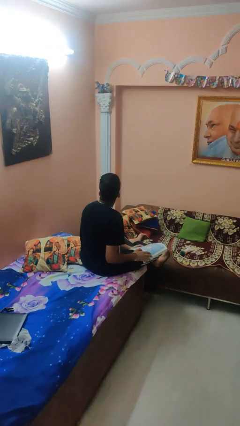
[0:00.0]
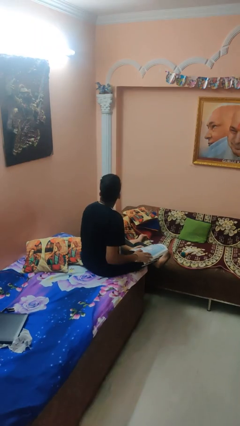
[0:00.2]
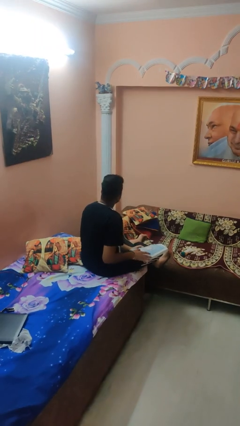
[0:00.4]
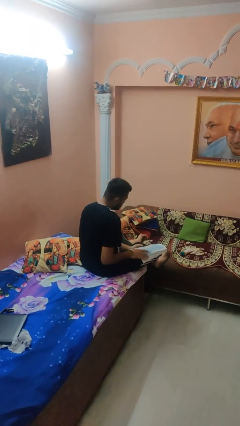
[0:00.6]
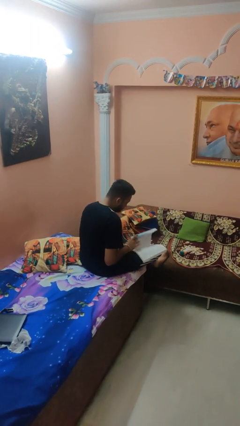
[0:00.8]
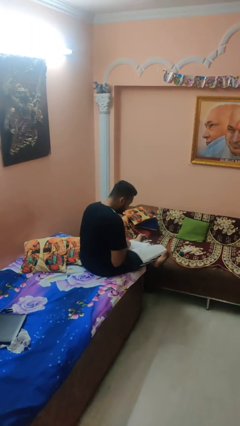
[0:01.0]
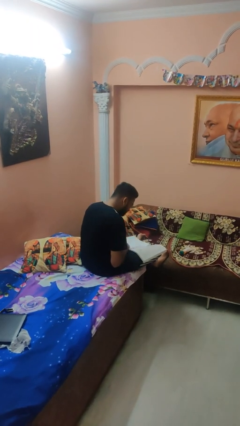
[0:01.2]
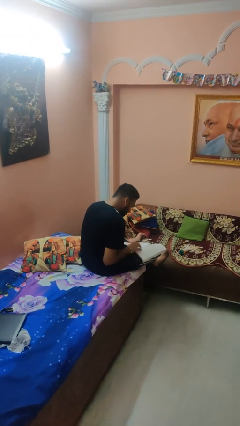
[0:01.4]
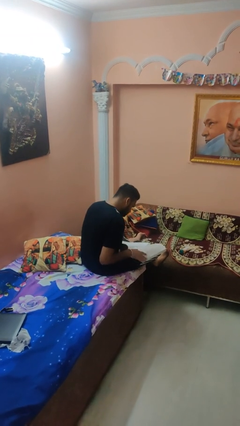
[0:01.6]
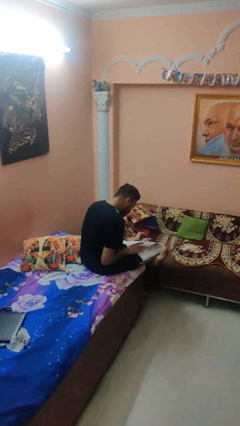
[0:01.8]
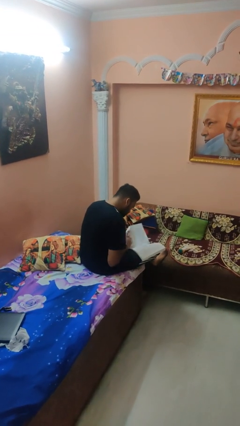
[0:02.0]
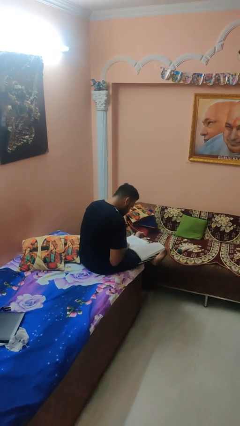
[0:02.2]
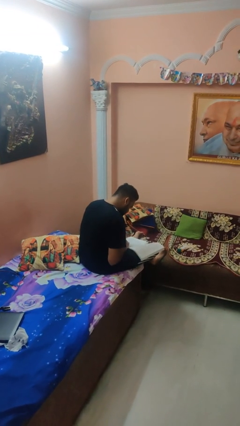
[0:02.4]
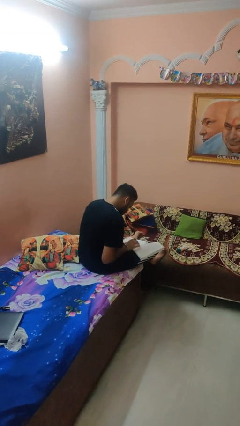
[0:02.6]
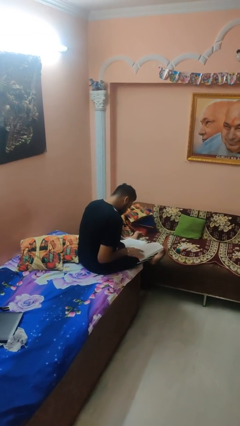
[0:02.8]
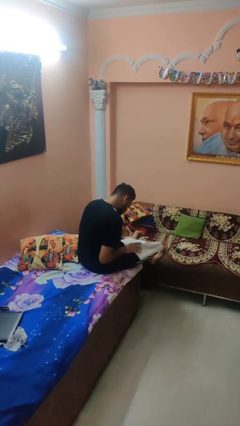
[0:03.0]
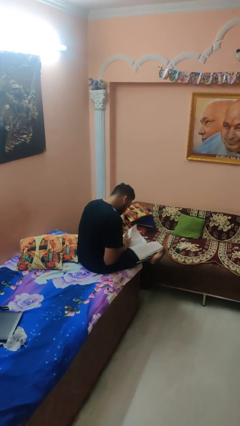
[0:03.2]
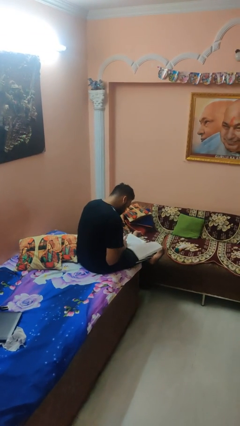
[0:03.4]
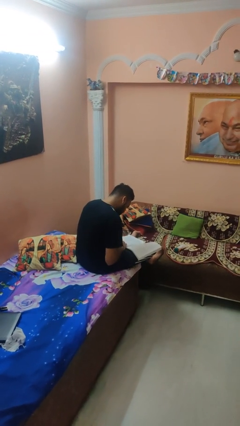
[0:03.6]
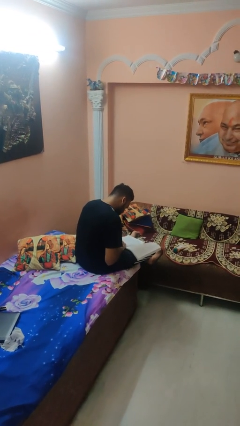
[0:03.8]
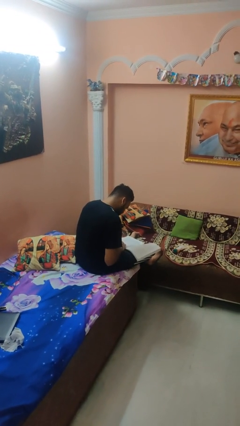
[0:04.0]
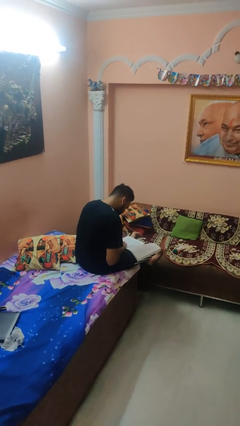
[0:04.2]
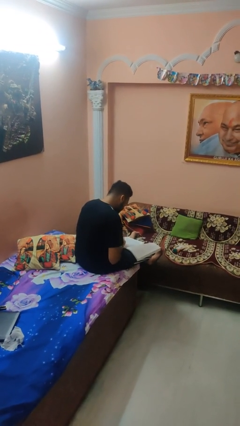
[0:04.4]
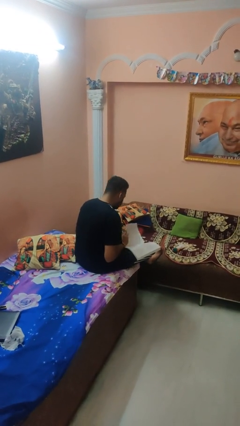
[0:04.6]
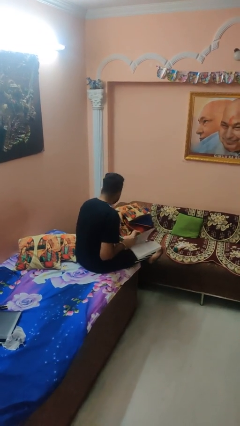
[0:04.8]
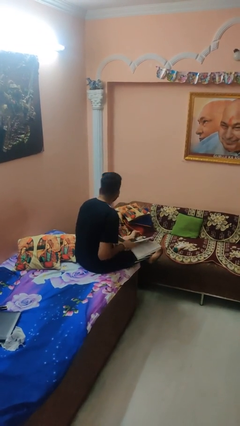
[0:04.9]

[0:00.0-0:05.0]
person reads book

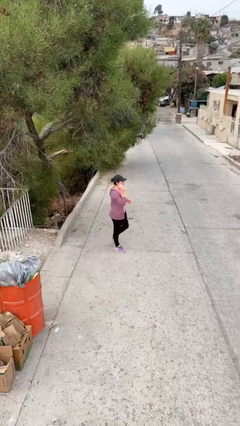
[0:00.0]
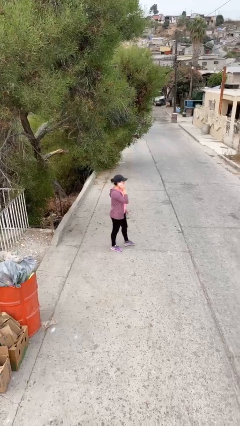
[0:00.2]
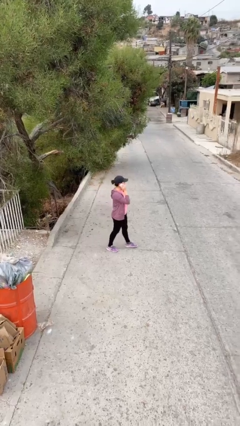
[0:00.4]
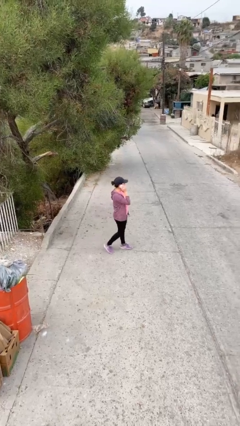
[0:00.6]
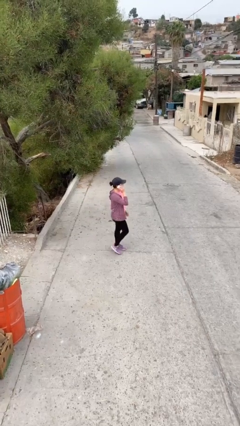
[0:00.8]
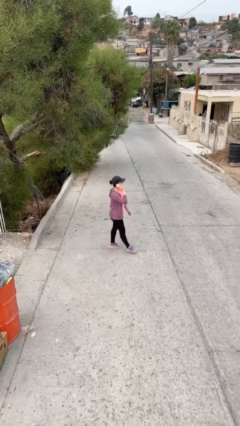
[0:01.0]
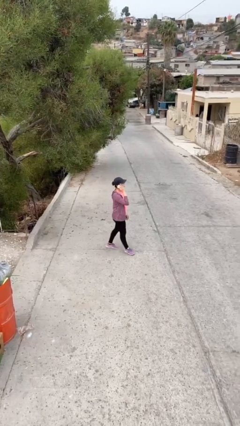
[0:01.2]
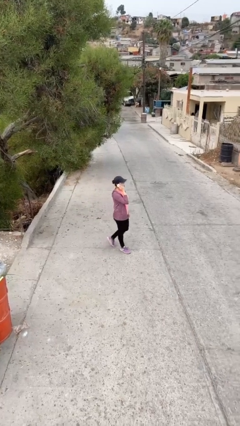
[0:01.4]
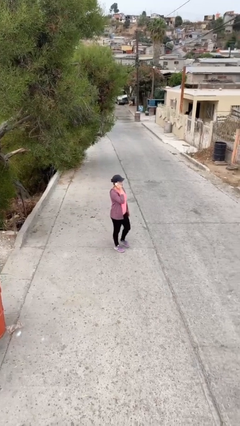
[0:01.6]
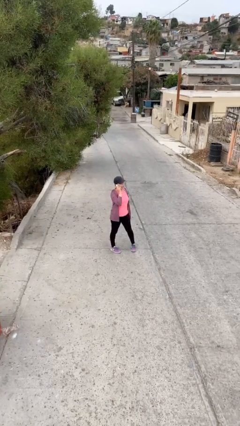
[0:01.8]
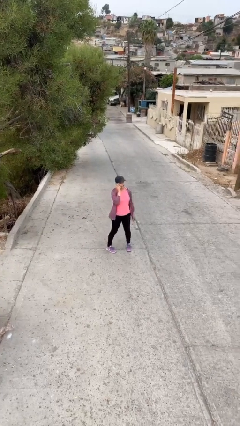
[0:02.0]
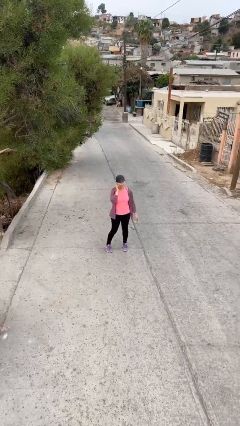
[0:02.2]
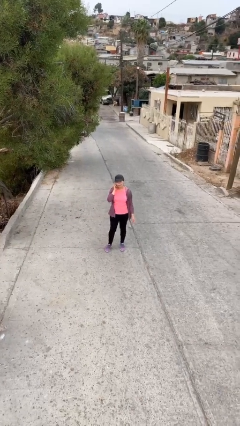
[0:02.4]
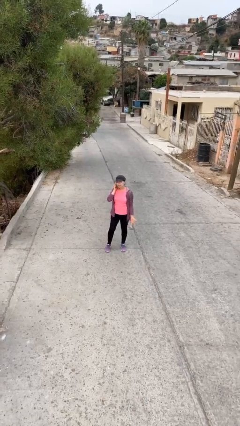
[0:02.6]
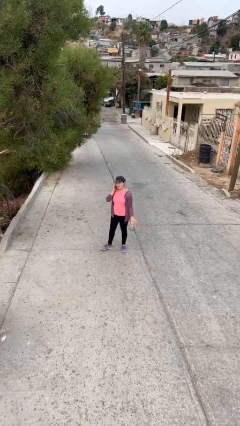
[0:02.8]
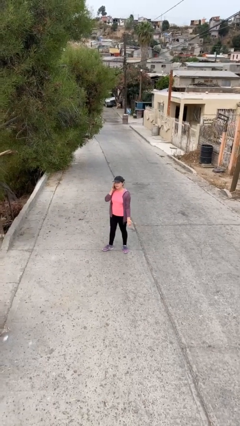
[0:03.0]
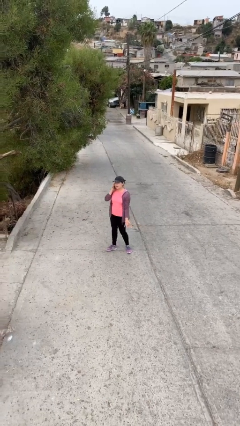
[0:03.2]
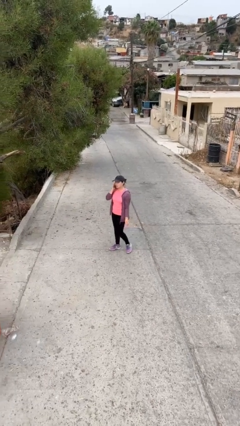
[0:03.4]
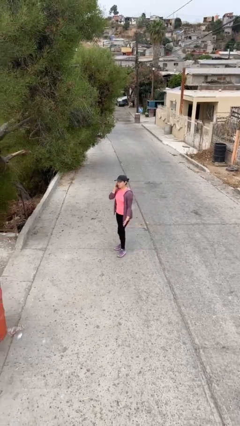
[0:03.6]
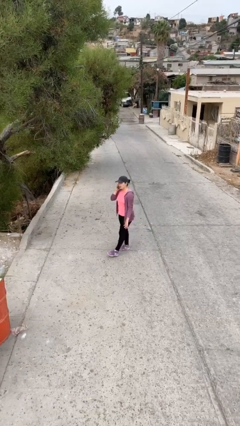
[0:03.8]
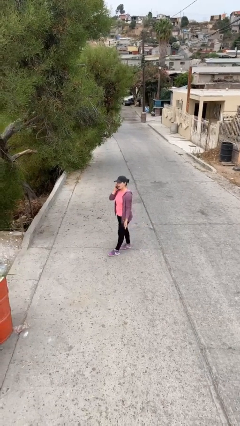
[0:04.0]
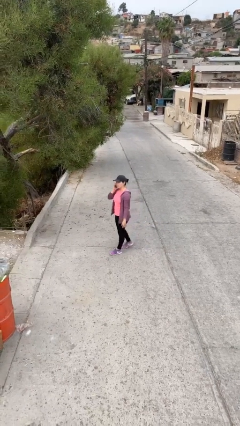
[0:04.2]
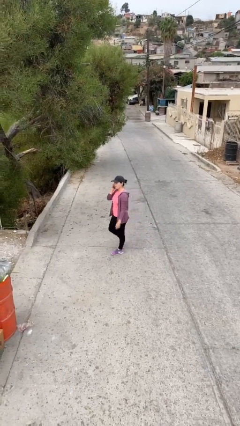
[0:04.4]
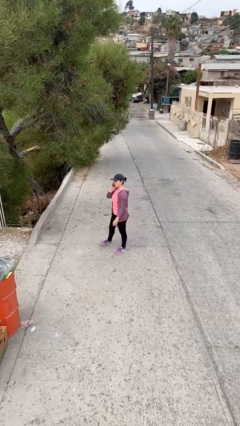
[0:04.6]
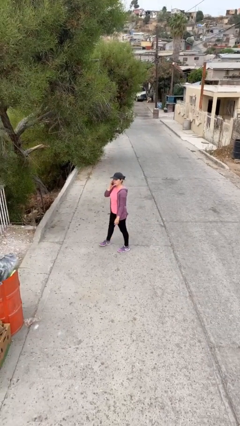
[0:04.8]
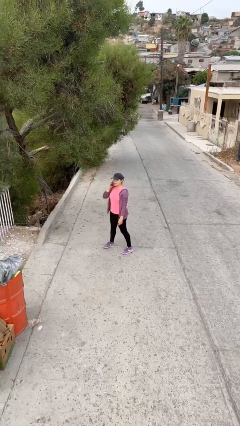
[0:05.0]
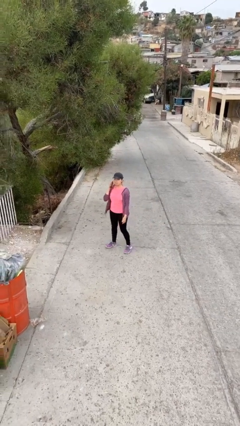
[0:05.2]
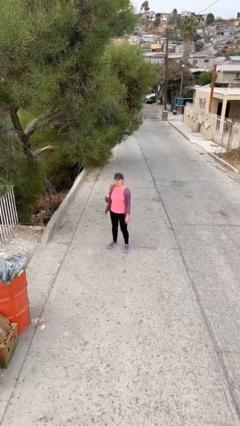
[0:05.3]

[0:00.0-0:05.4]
person talks on phone

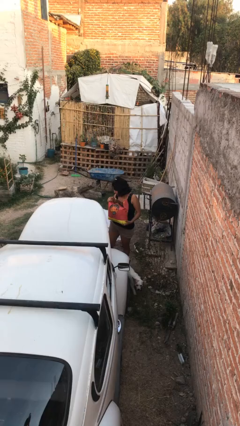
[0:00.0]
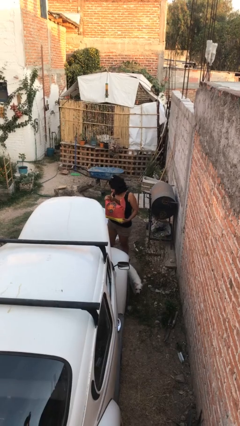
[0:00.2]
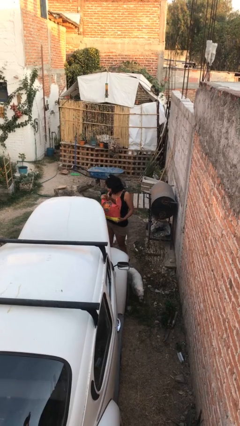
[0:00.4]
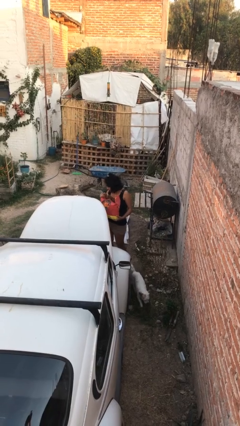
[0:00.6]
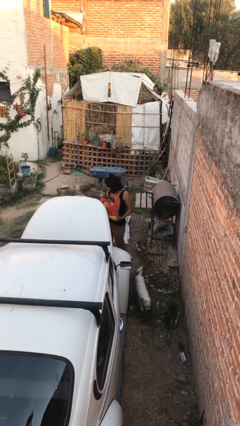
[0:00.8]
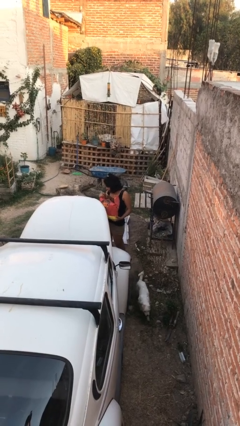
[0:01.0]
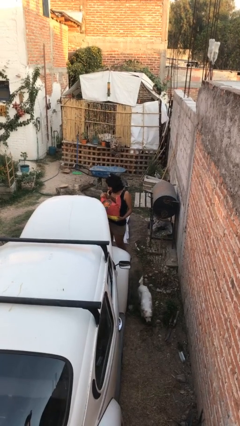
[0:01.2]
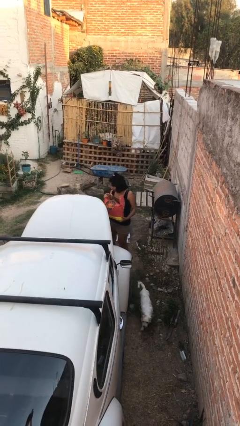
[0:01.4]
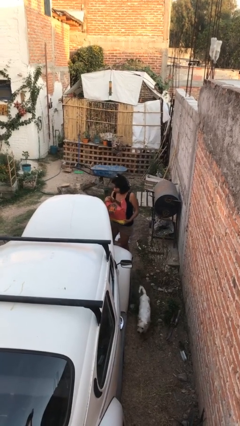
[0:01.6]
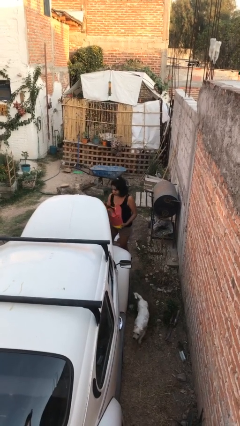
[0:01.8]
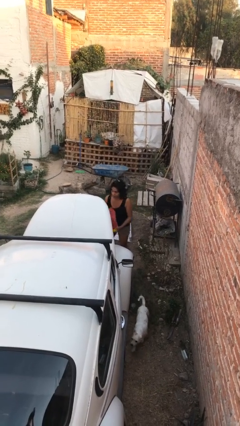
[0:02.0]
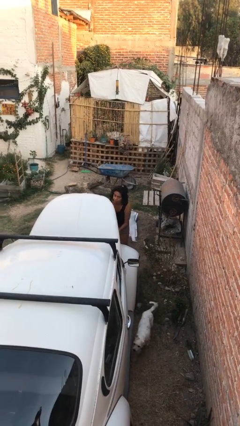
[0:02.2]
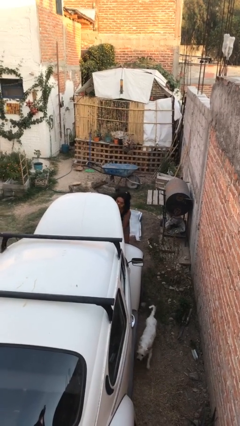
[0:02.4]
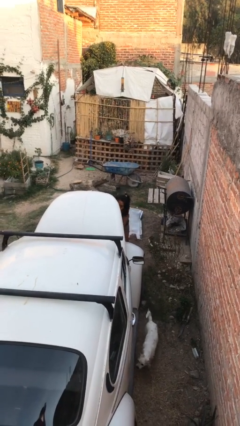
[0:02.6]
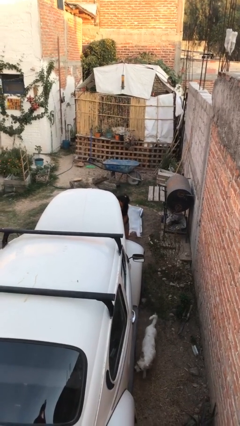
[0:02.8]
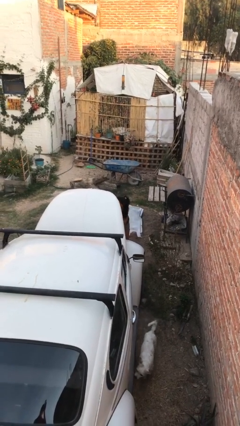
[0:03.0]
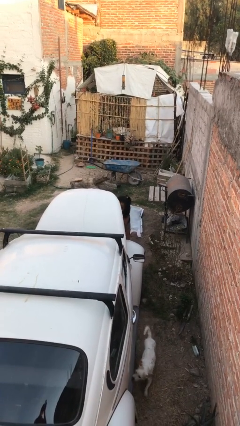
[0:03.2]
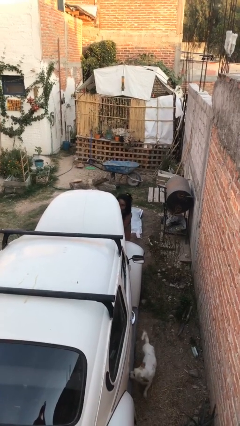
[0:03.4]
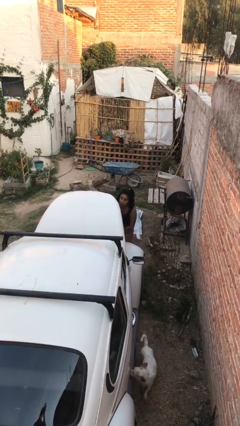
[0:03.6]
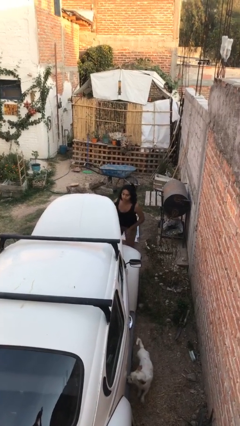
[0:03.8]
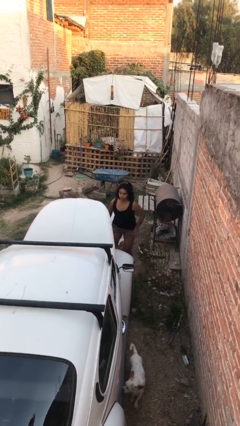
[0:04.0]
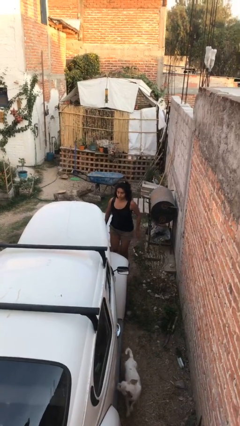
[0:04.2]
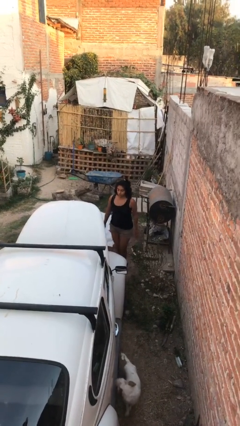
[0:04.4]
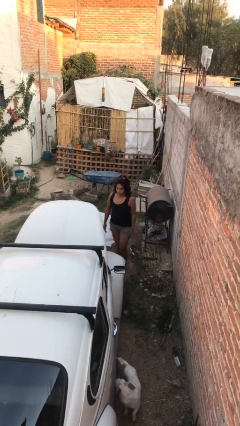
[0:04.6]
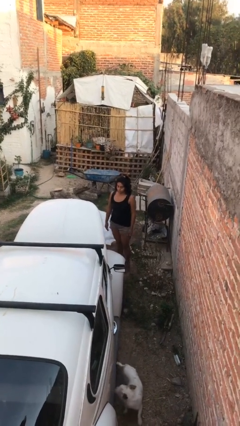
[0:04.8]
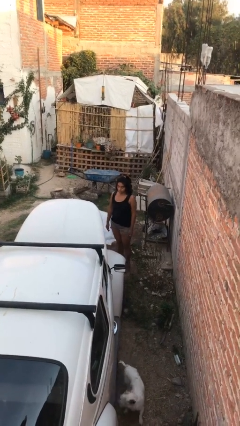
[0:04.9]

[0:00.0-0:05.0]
person loads car

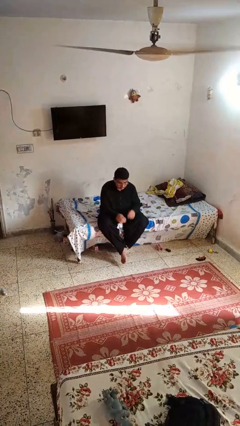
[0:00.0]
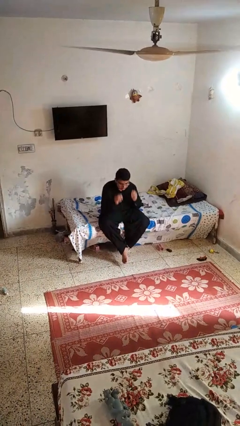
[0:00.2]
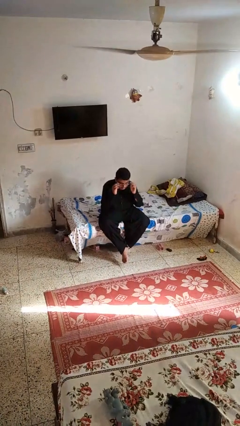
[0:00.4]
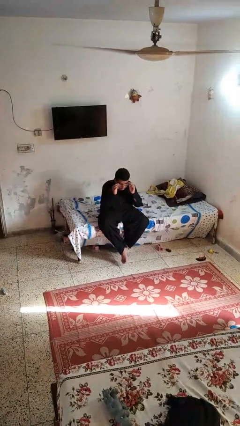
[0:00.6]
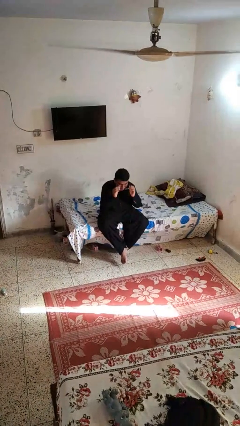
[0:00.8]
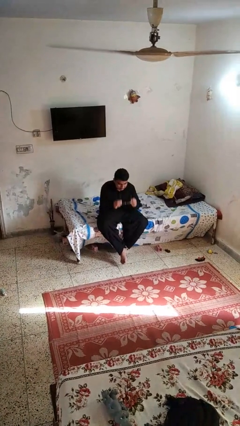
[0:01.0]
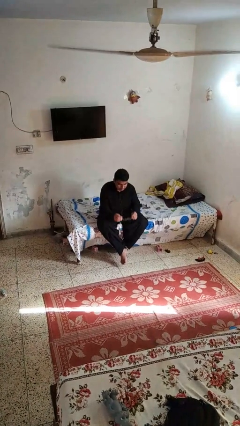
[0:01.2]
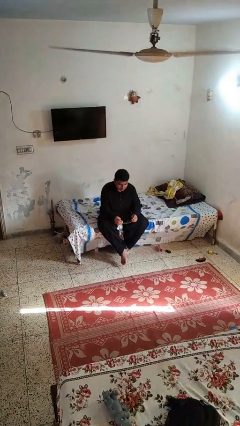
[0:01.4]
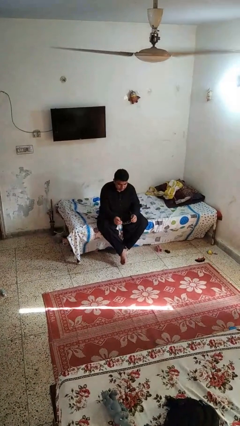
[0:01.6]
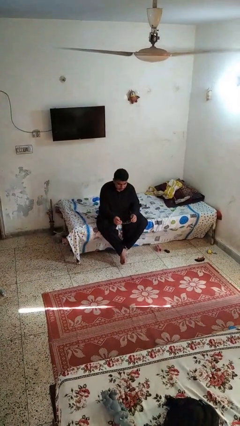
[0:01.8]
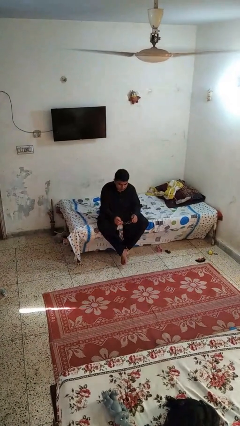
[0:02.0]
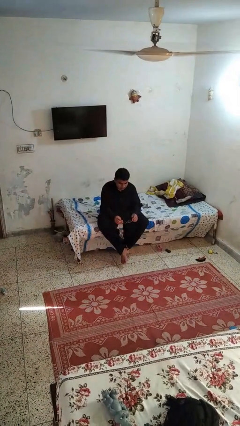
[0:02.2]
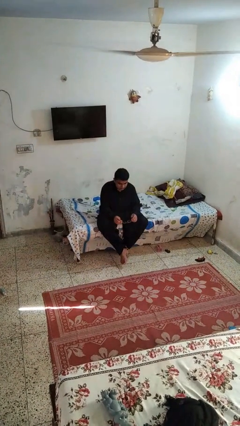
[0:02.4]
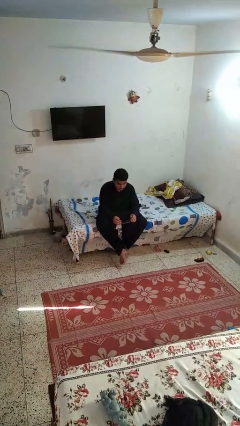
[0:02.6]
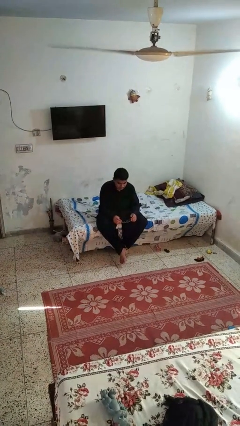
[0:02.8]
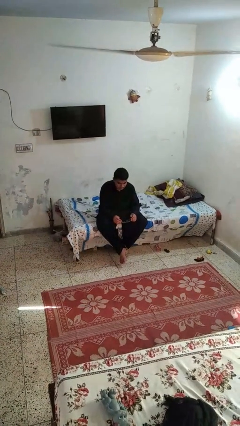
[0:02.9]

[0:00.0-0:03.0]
person takes off glasses
